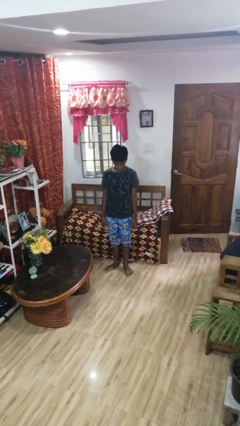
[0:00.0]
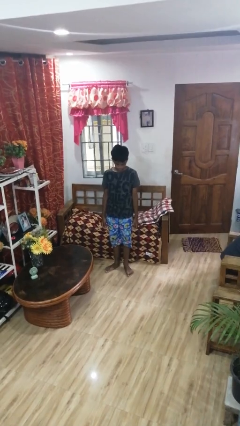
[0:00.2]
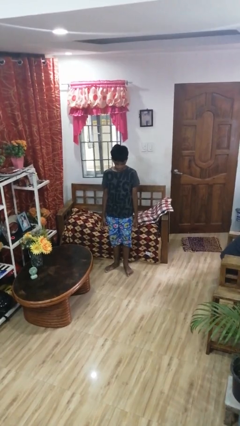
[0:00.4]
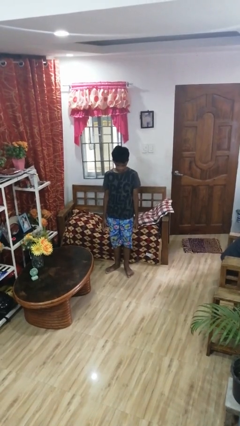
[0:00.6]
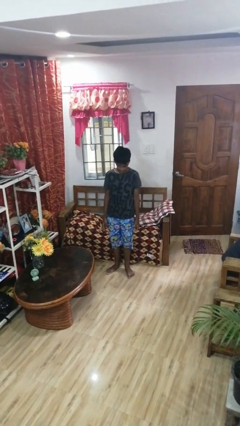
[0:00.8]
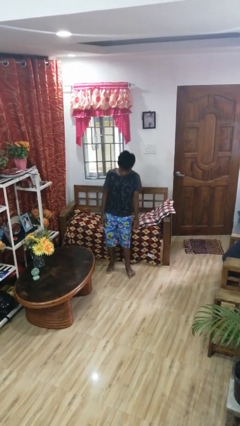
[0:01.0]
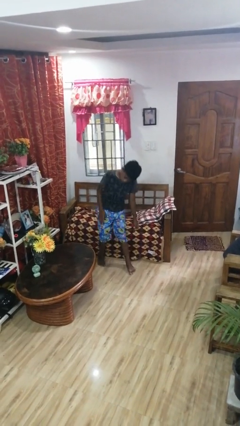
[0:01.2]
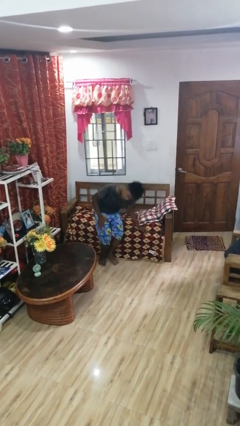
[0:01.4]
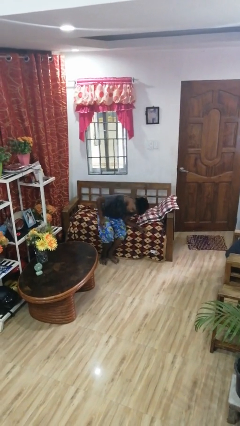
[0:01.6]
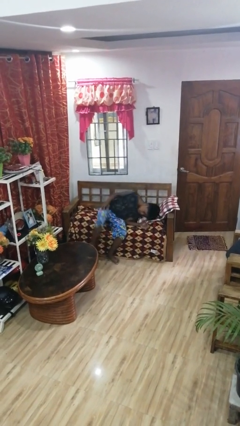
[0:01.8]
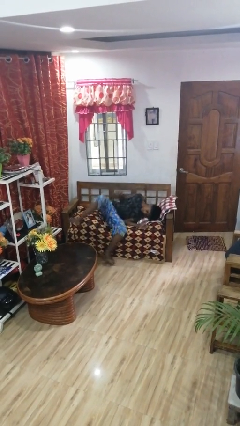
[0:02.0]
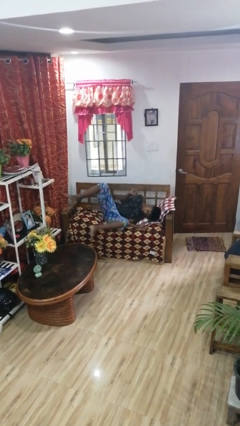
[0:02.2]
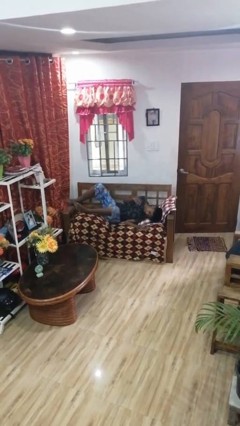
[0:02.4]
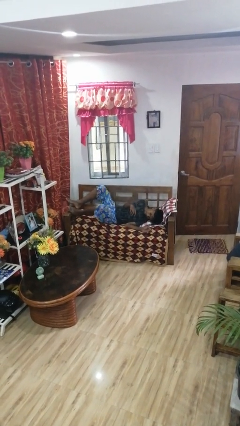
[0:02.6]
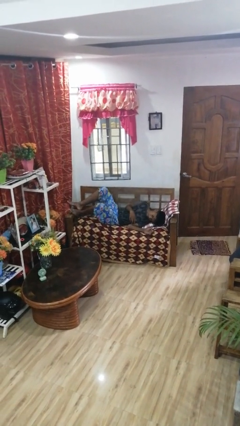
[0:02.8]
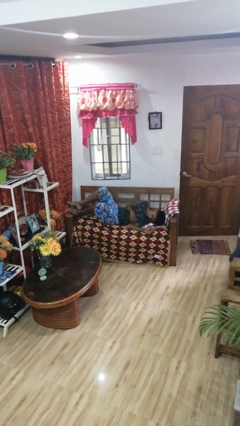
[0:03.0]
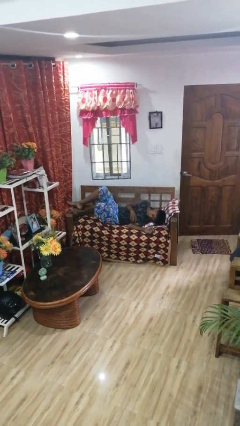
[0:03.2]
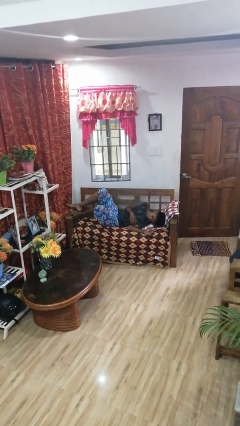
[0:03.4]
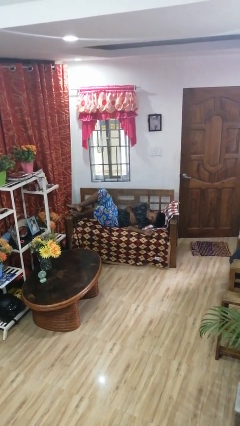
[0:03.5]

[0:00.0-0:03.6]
person lies down on couch

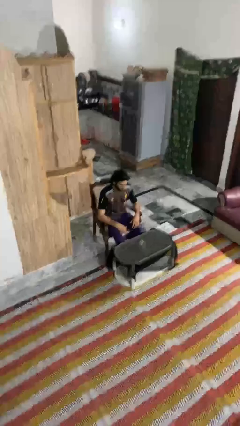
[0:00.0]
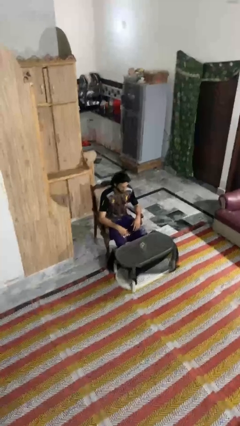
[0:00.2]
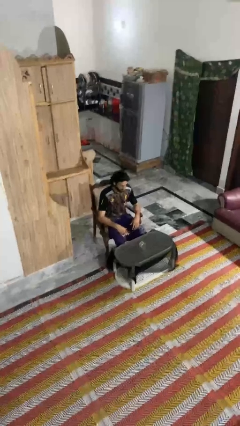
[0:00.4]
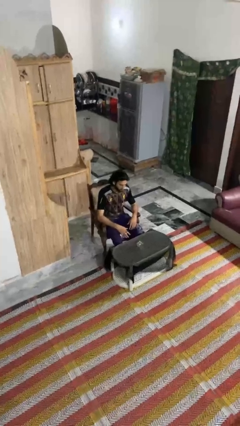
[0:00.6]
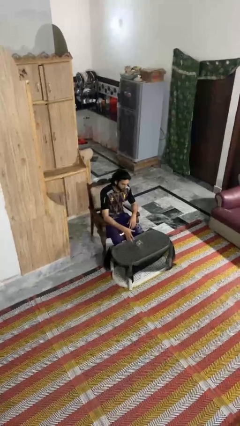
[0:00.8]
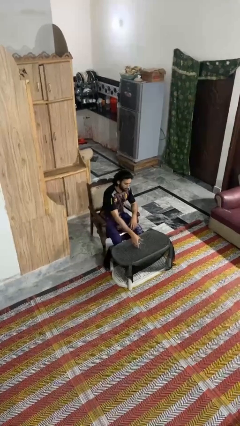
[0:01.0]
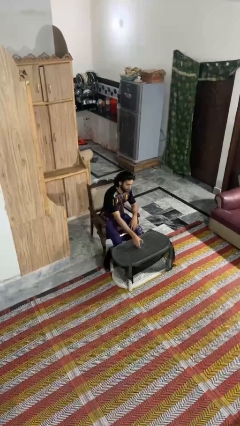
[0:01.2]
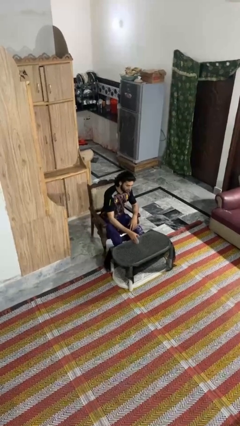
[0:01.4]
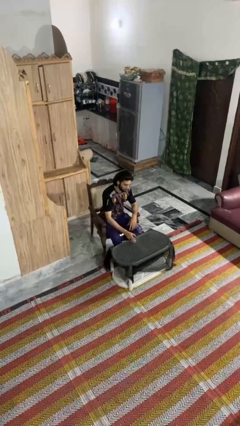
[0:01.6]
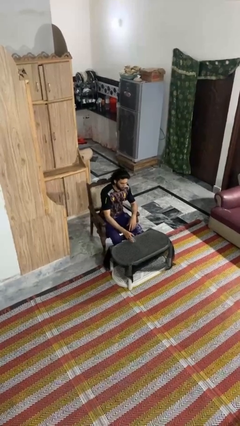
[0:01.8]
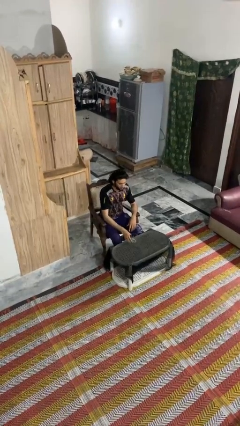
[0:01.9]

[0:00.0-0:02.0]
person sets upright glass

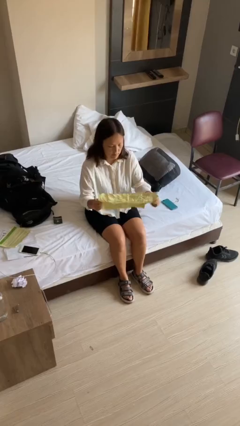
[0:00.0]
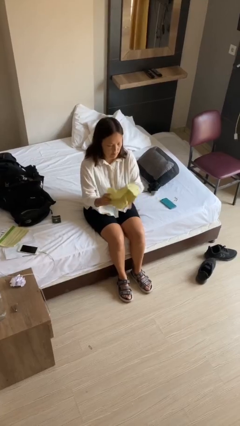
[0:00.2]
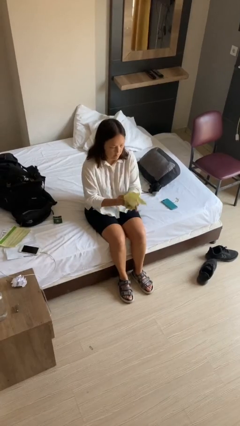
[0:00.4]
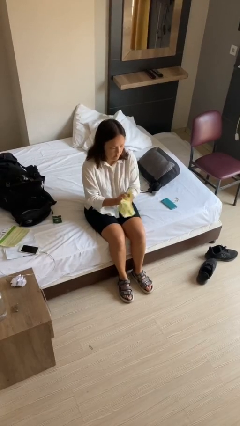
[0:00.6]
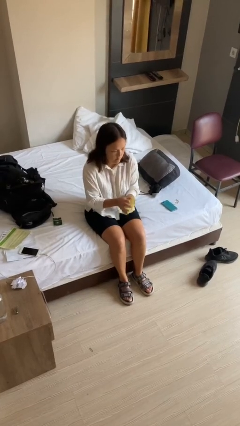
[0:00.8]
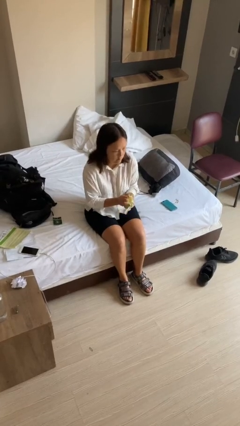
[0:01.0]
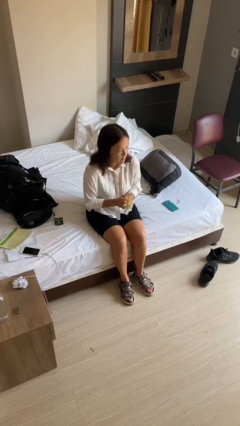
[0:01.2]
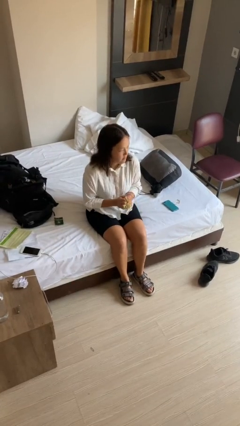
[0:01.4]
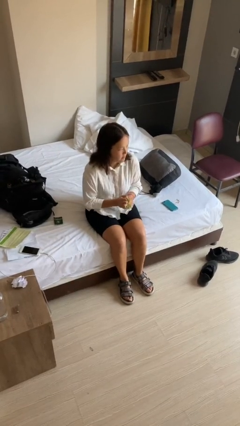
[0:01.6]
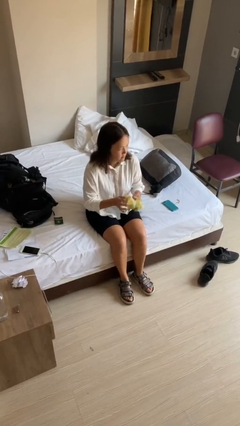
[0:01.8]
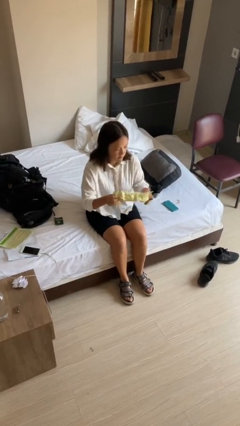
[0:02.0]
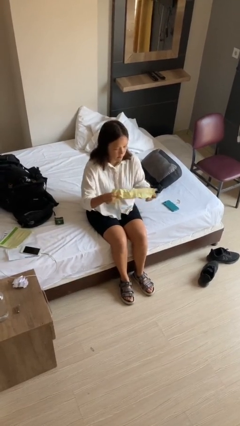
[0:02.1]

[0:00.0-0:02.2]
person crumples paper

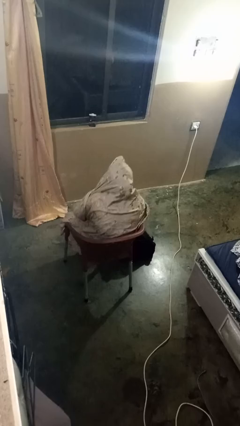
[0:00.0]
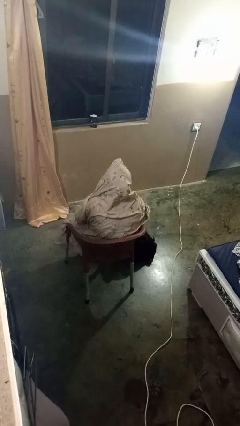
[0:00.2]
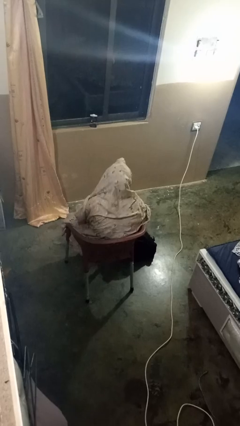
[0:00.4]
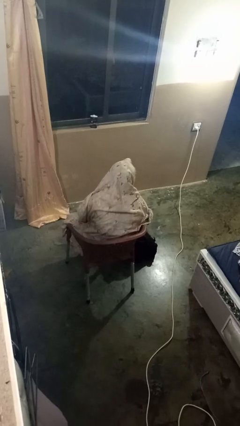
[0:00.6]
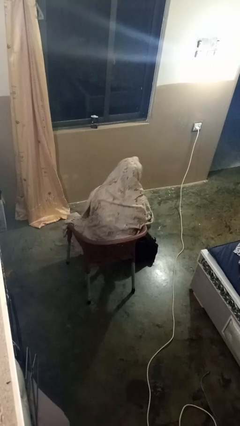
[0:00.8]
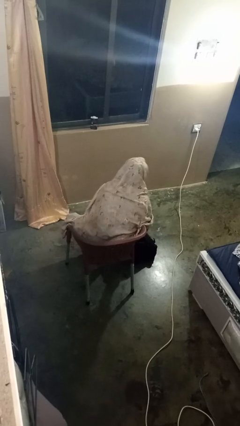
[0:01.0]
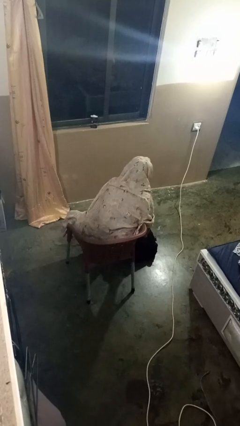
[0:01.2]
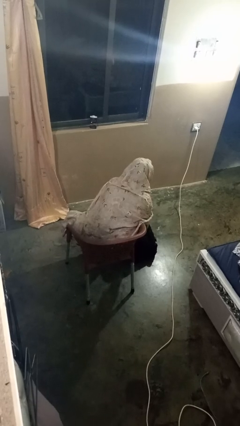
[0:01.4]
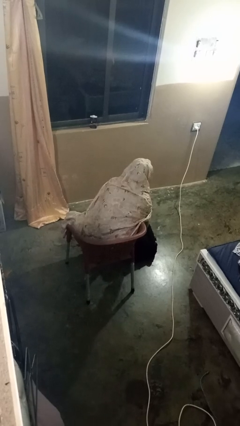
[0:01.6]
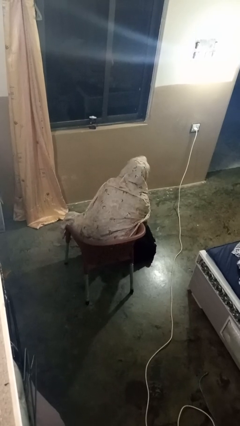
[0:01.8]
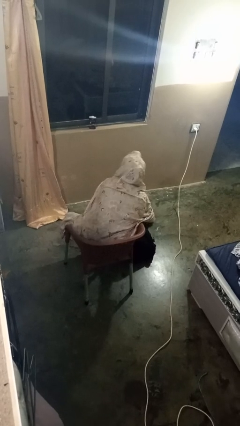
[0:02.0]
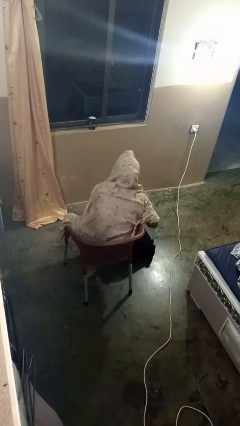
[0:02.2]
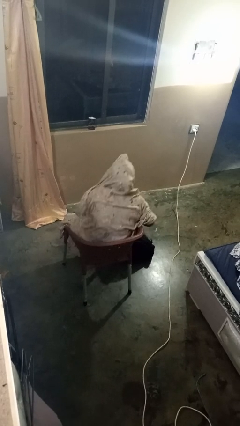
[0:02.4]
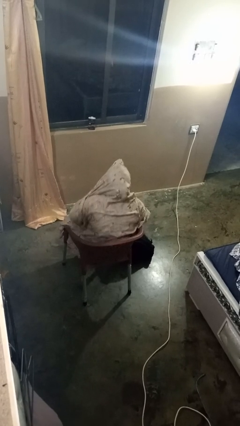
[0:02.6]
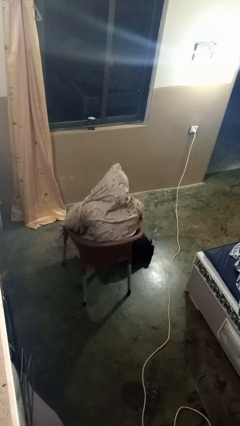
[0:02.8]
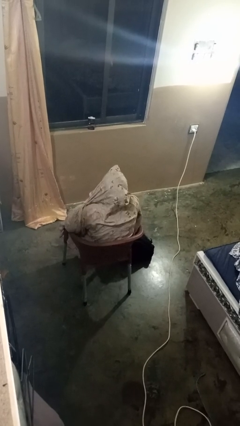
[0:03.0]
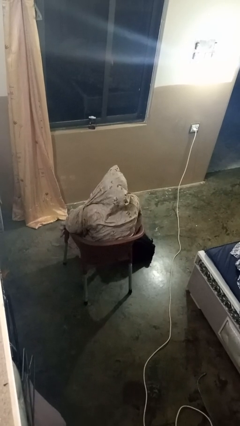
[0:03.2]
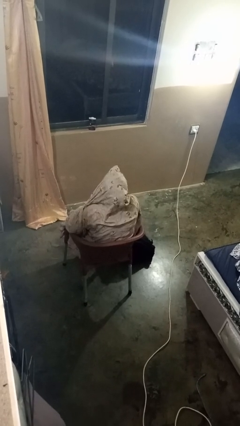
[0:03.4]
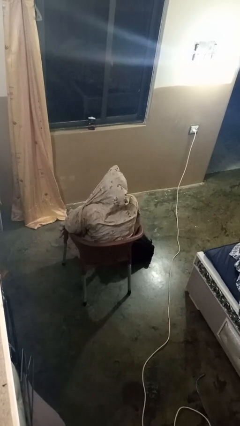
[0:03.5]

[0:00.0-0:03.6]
person eats snack from bag

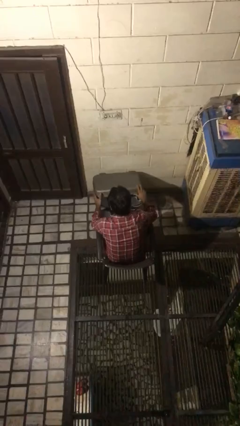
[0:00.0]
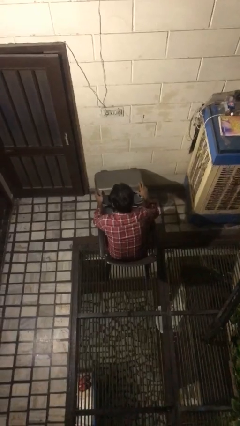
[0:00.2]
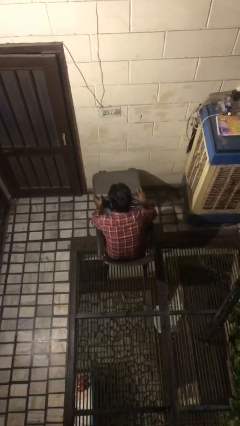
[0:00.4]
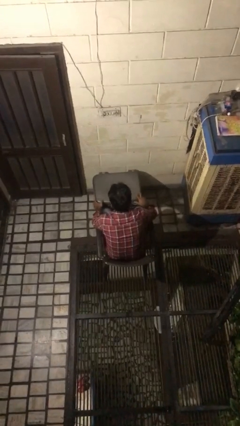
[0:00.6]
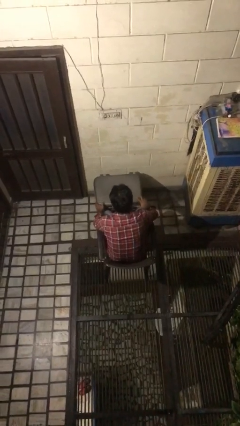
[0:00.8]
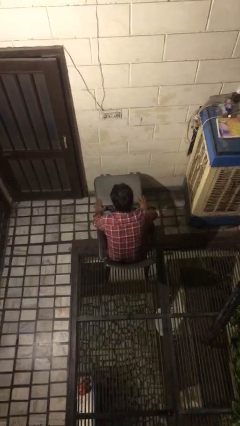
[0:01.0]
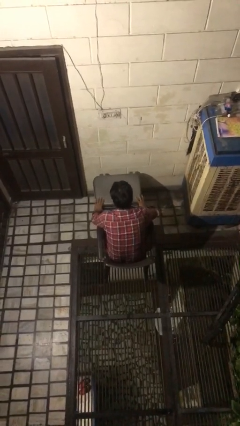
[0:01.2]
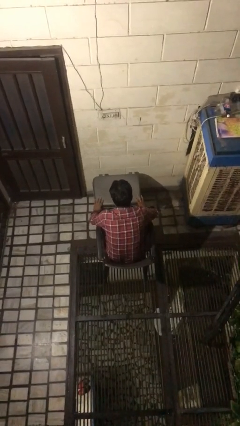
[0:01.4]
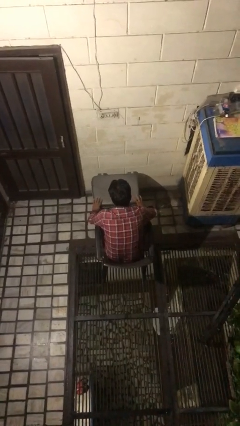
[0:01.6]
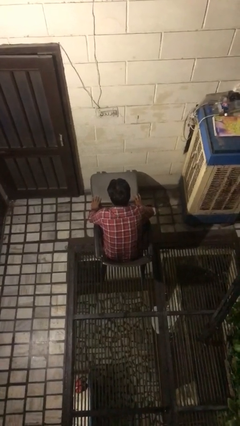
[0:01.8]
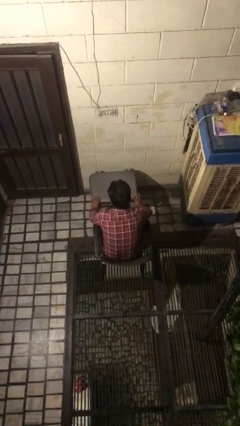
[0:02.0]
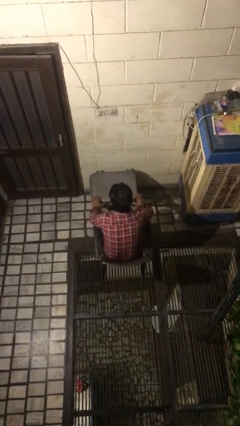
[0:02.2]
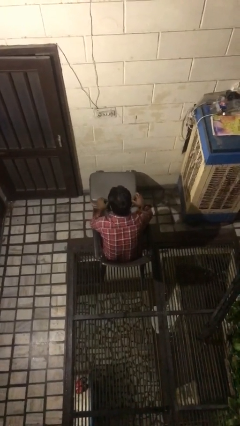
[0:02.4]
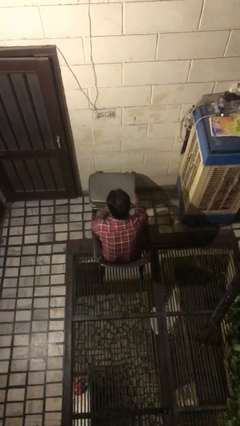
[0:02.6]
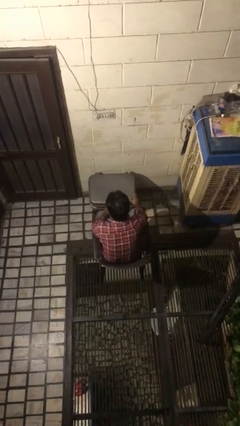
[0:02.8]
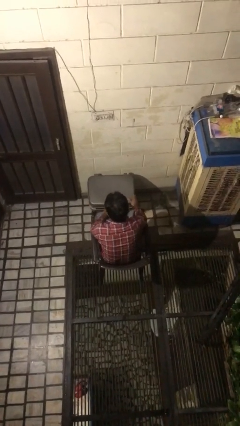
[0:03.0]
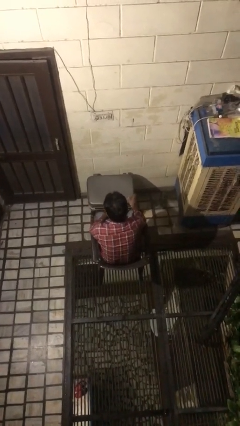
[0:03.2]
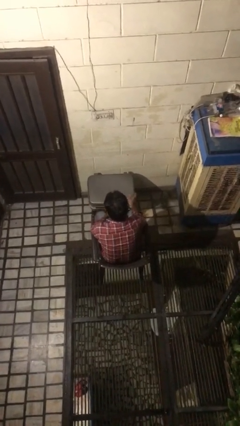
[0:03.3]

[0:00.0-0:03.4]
person closes suitcase

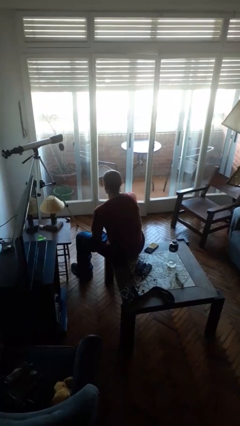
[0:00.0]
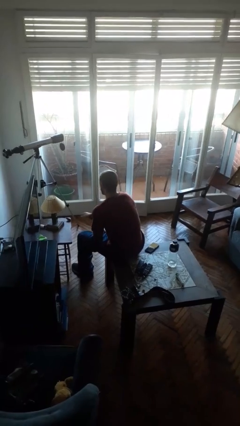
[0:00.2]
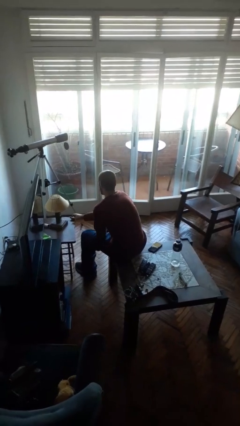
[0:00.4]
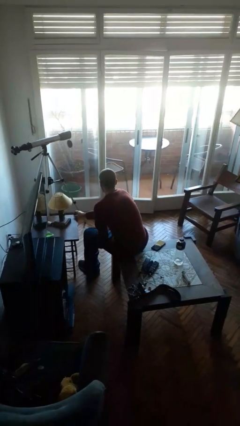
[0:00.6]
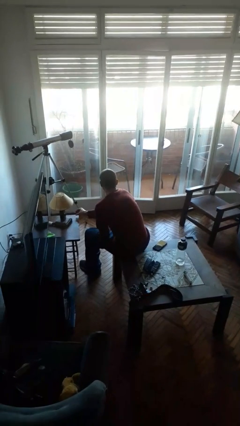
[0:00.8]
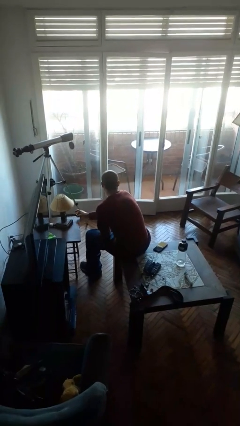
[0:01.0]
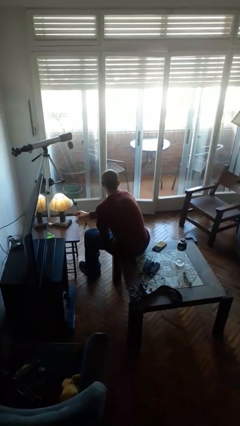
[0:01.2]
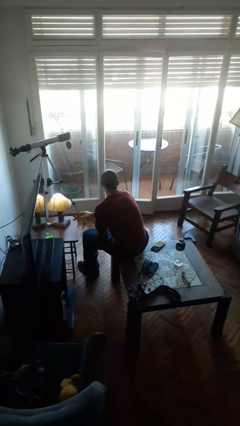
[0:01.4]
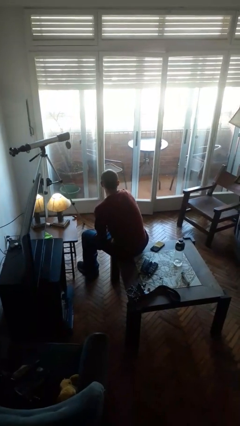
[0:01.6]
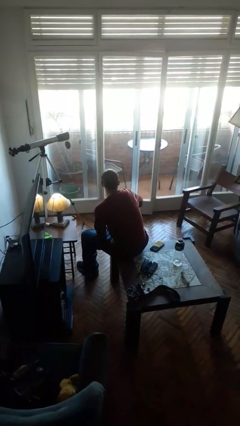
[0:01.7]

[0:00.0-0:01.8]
person turns on lamp

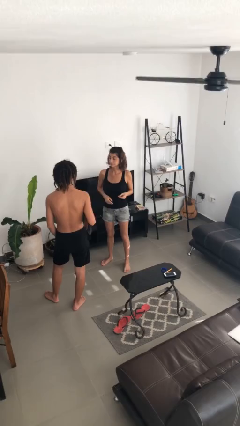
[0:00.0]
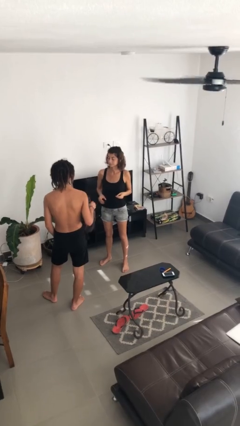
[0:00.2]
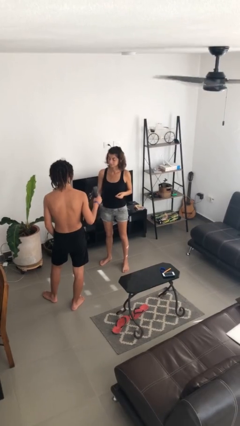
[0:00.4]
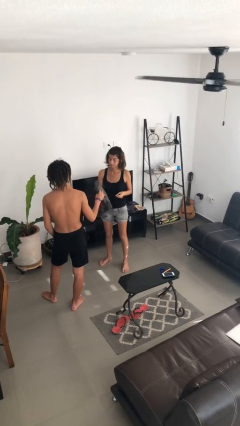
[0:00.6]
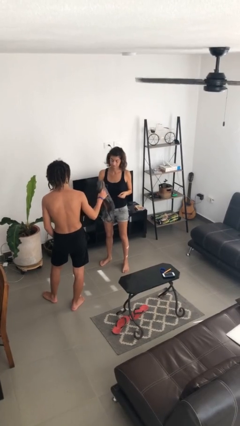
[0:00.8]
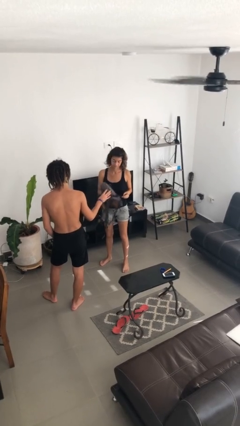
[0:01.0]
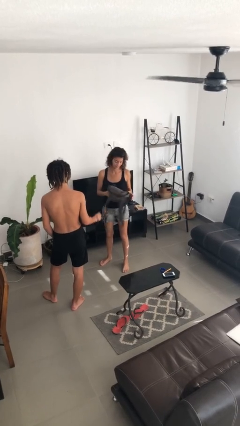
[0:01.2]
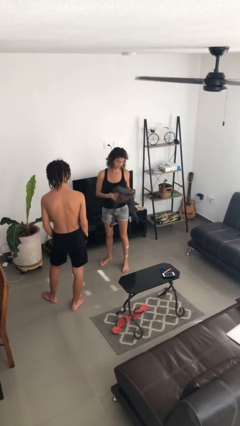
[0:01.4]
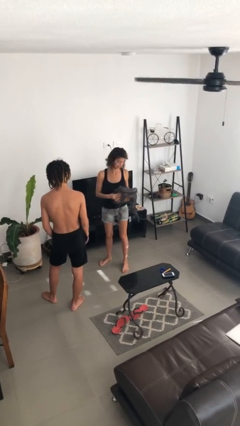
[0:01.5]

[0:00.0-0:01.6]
person transfers object to person
